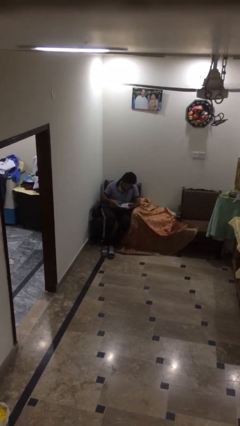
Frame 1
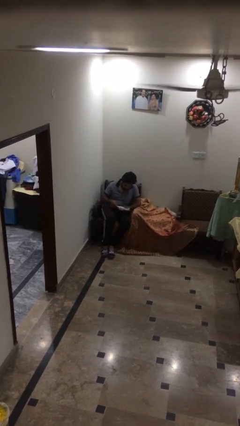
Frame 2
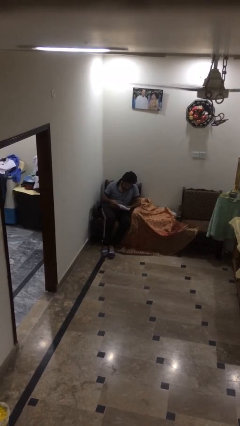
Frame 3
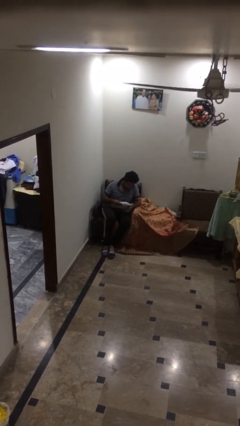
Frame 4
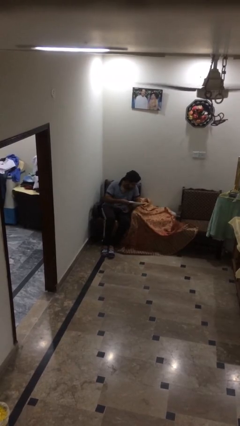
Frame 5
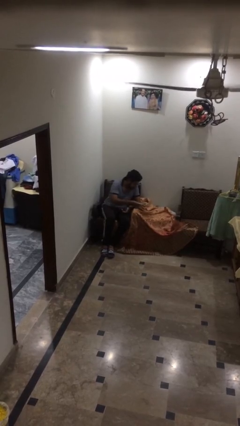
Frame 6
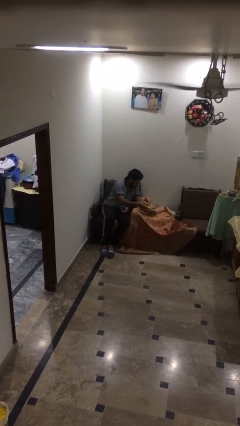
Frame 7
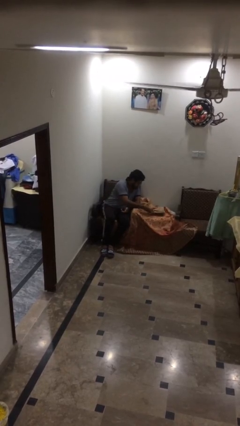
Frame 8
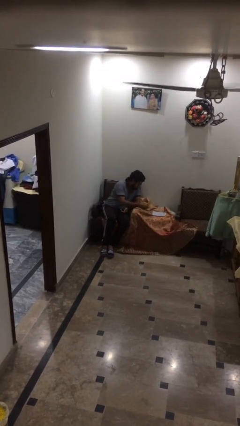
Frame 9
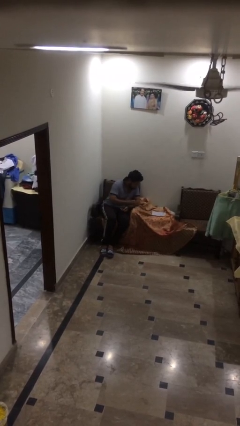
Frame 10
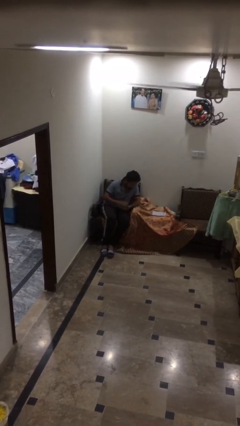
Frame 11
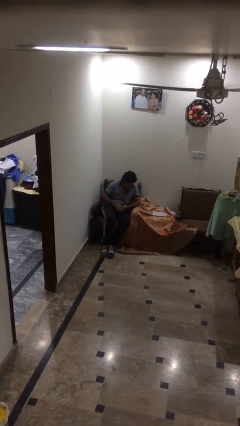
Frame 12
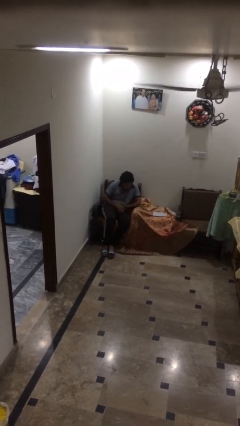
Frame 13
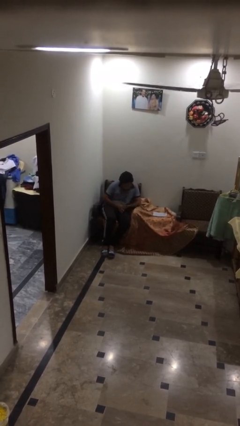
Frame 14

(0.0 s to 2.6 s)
person puts down object on table

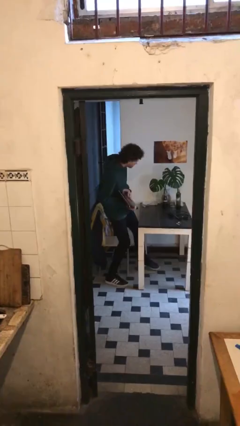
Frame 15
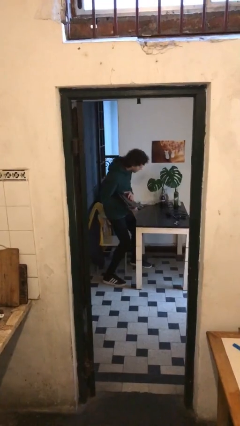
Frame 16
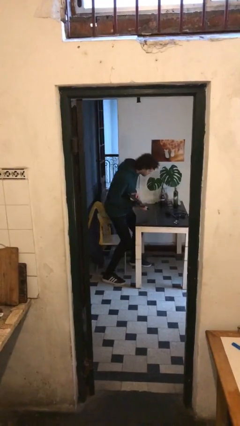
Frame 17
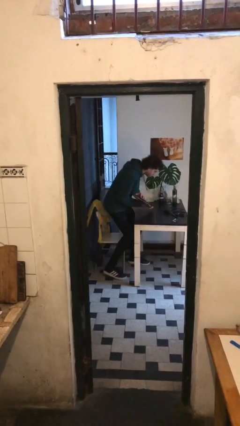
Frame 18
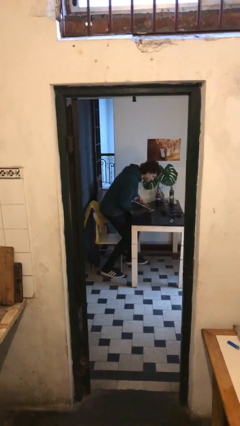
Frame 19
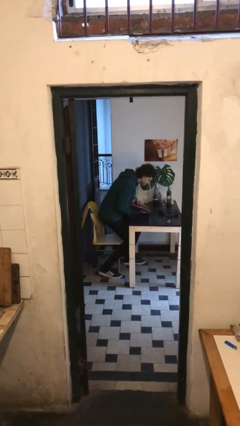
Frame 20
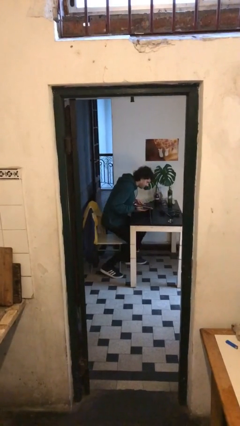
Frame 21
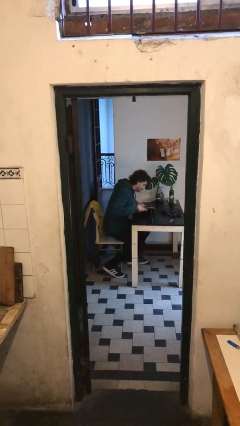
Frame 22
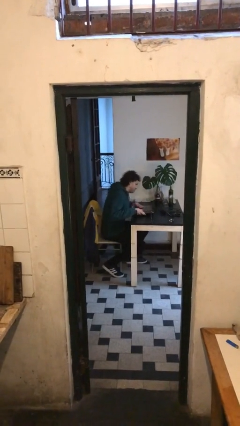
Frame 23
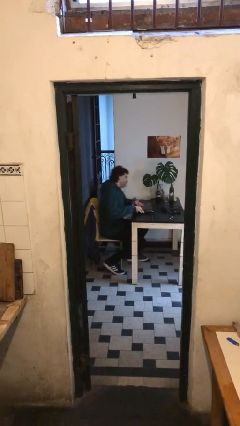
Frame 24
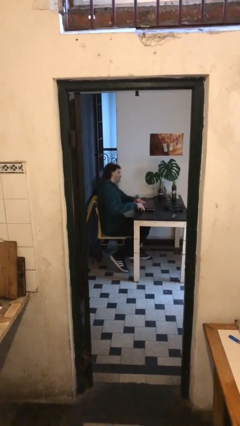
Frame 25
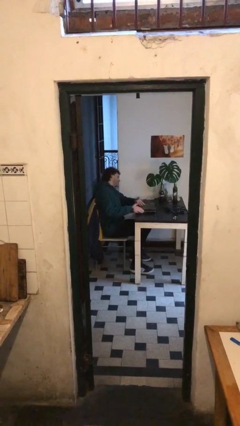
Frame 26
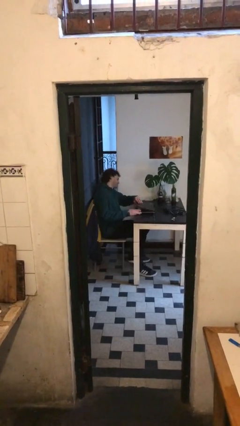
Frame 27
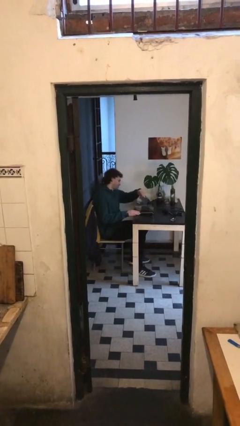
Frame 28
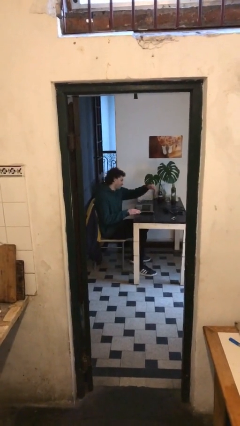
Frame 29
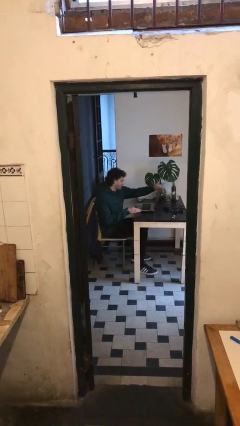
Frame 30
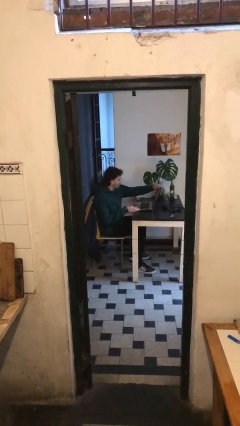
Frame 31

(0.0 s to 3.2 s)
person sits down

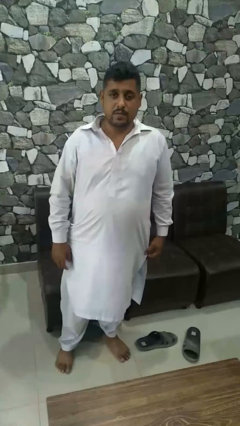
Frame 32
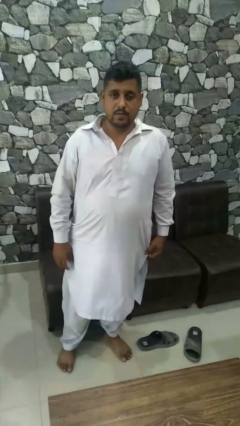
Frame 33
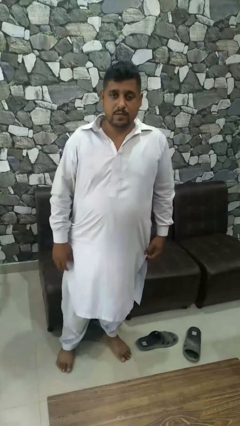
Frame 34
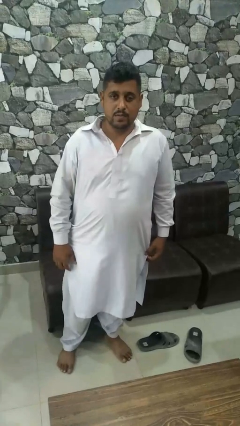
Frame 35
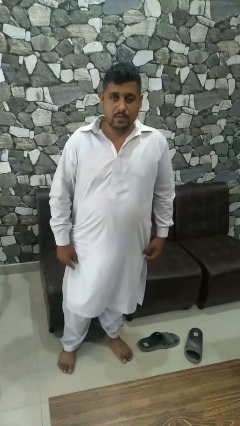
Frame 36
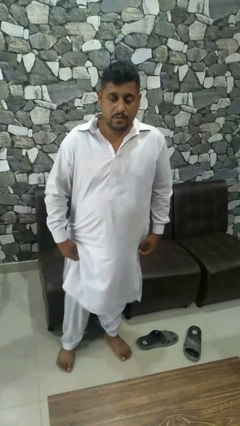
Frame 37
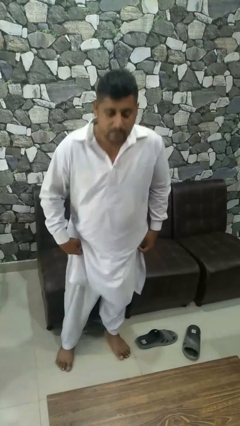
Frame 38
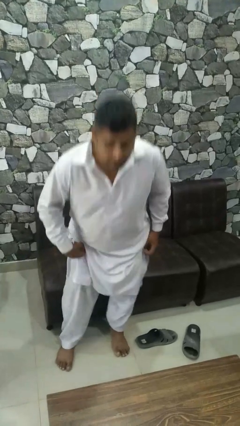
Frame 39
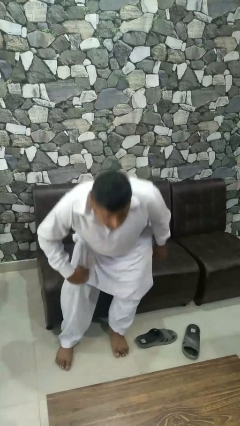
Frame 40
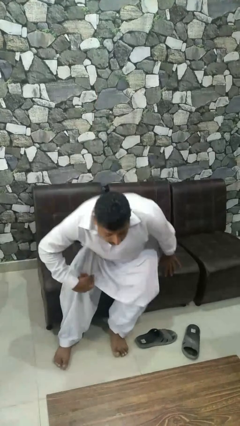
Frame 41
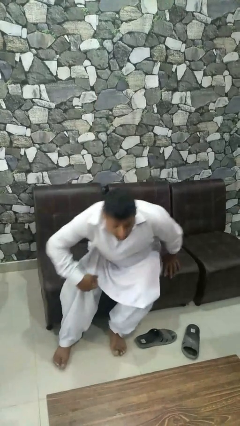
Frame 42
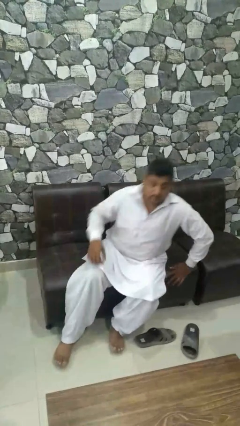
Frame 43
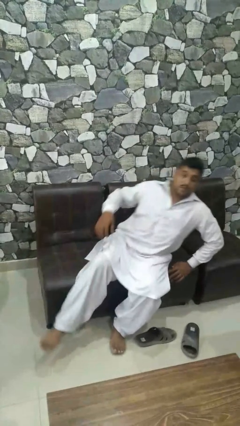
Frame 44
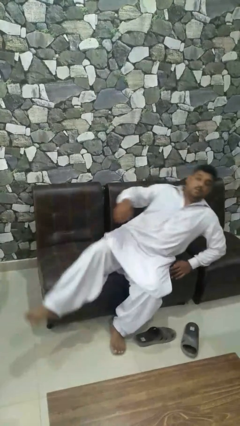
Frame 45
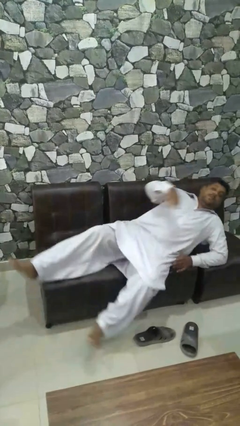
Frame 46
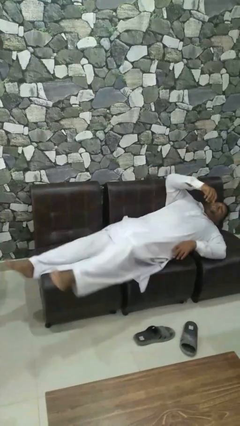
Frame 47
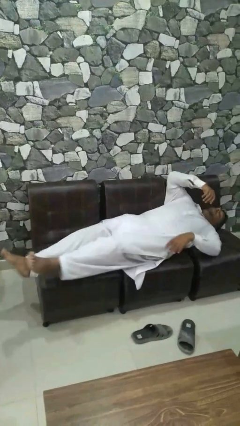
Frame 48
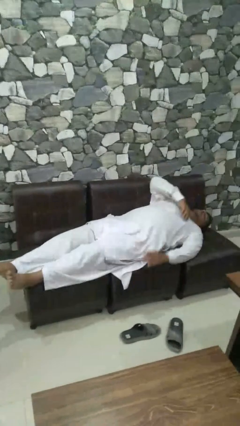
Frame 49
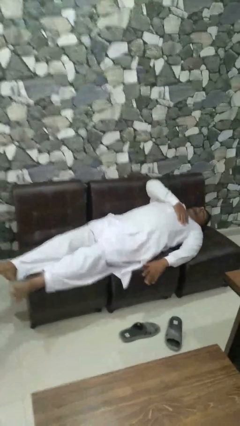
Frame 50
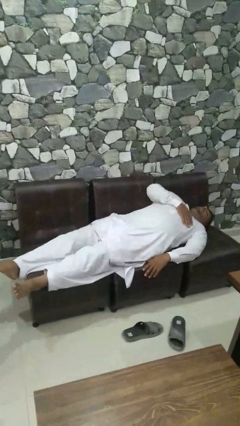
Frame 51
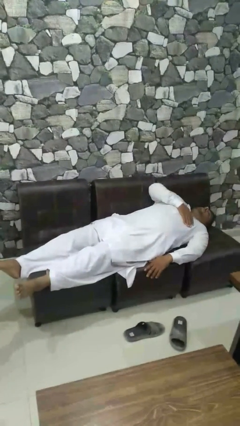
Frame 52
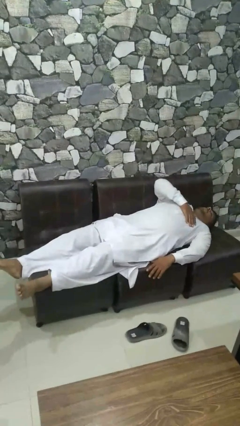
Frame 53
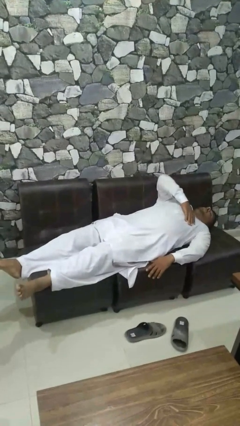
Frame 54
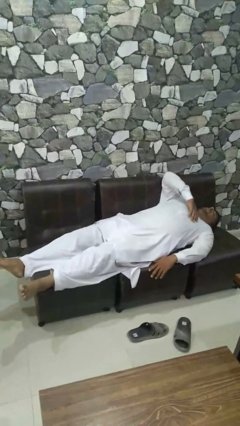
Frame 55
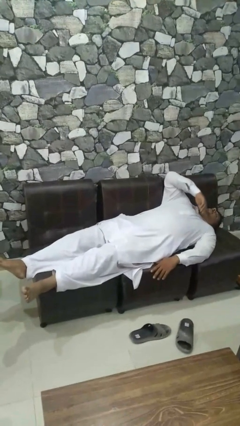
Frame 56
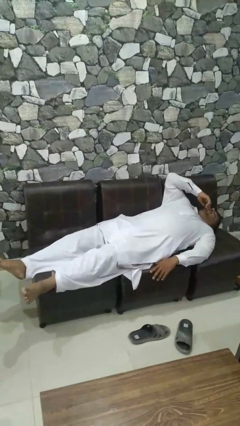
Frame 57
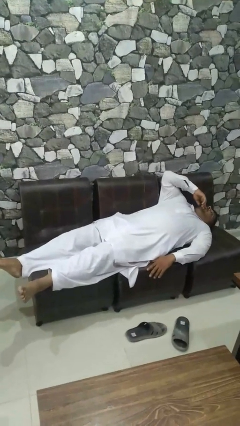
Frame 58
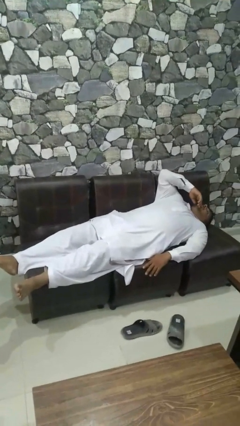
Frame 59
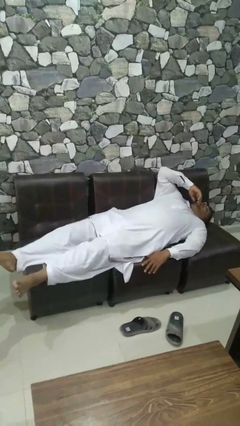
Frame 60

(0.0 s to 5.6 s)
person lies down on couch

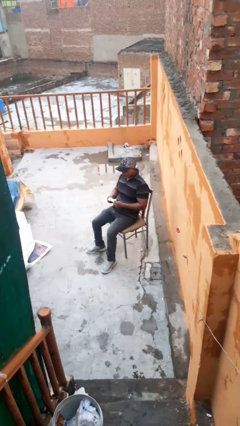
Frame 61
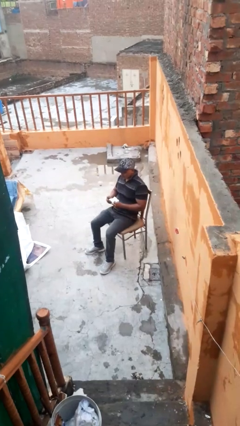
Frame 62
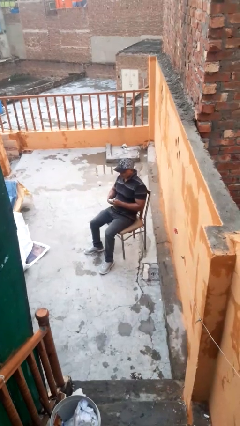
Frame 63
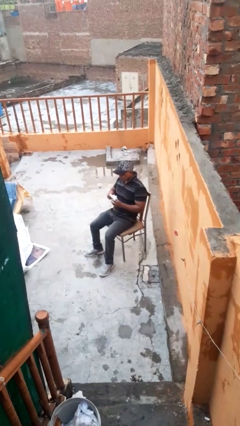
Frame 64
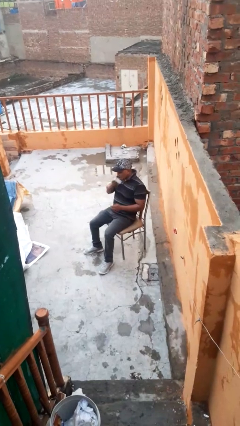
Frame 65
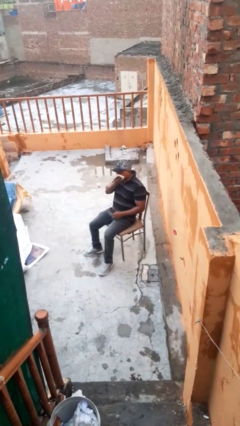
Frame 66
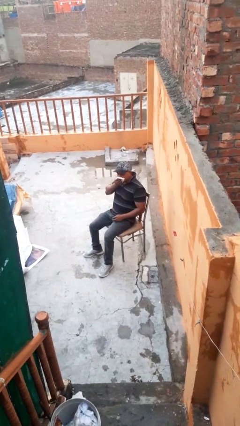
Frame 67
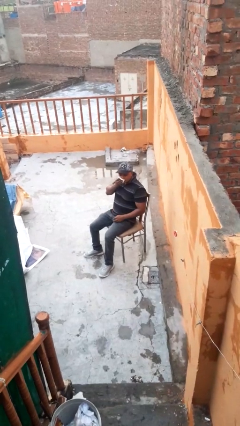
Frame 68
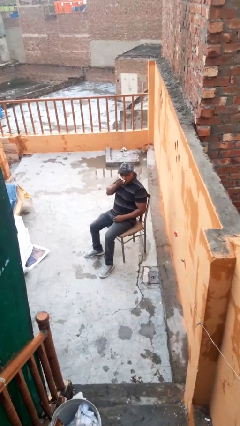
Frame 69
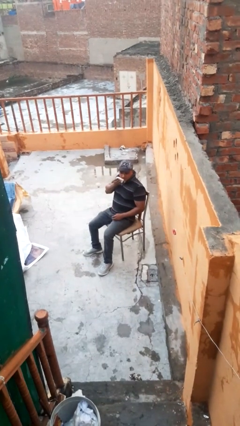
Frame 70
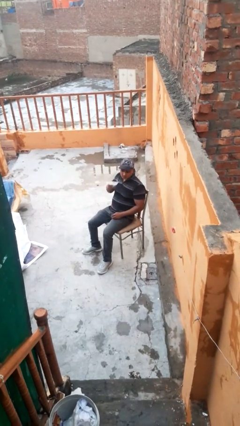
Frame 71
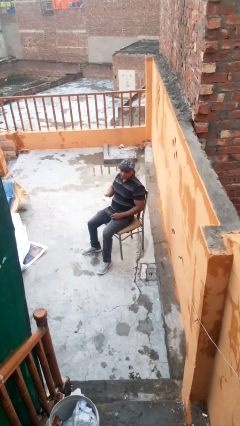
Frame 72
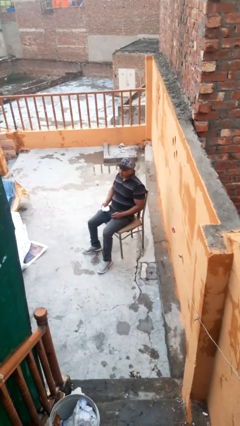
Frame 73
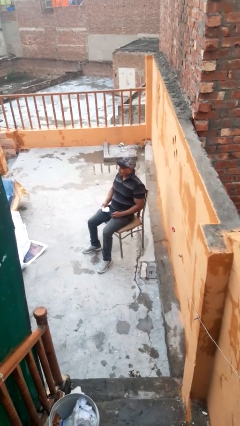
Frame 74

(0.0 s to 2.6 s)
person wipes mouth with napkin

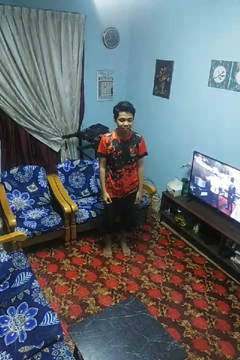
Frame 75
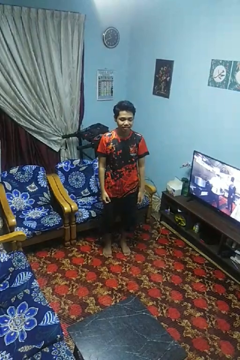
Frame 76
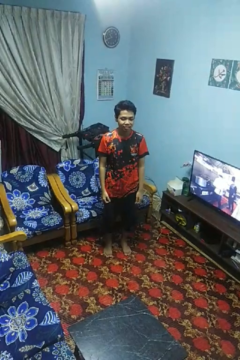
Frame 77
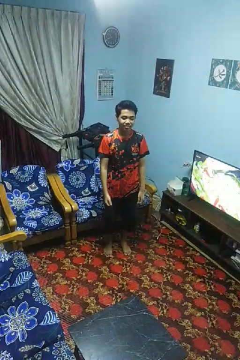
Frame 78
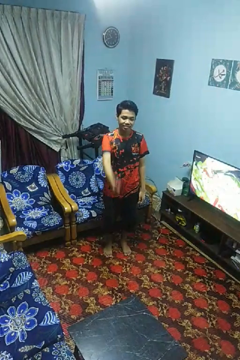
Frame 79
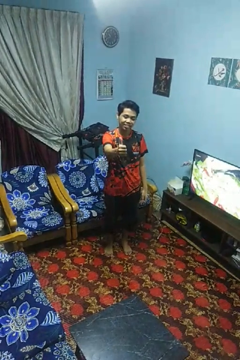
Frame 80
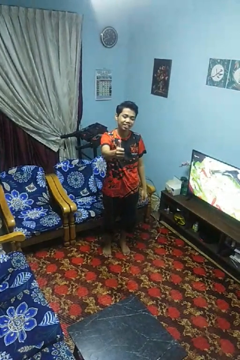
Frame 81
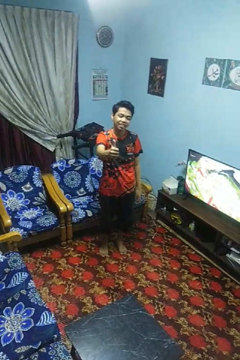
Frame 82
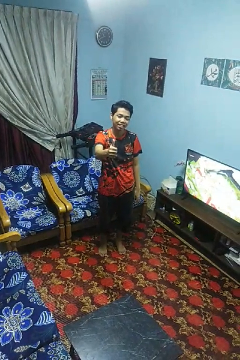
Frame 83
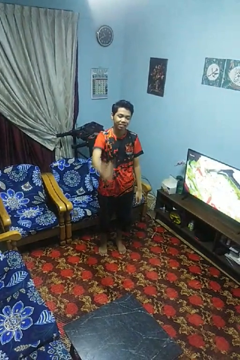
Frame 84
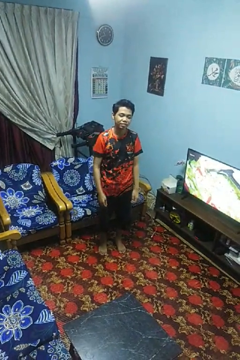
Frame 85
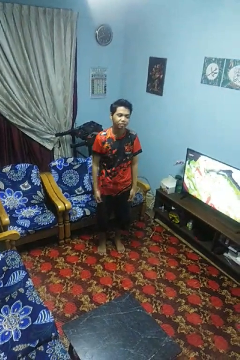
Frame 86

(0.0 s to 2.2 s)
person gestures thumbs up

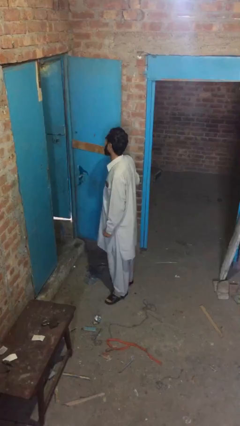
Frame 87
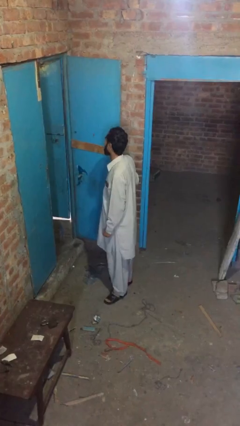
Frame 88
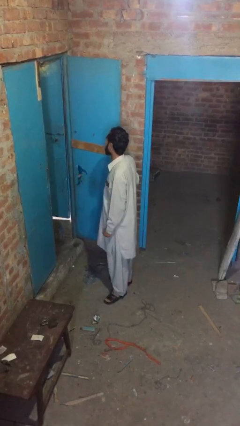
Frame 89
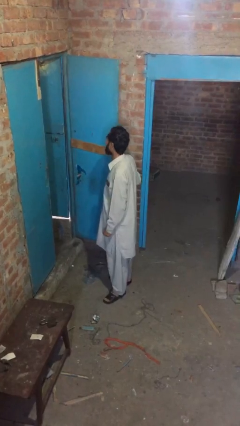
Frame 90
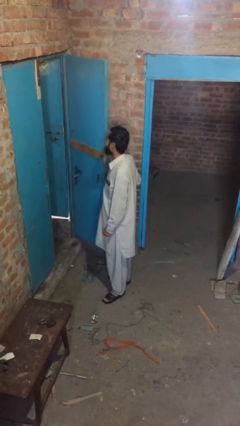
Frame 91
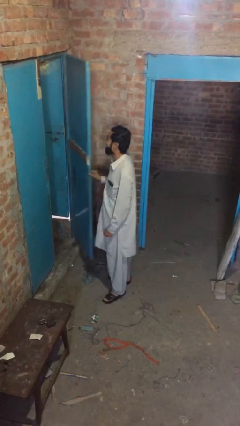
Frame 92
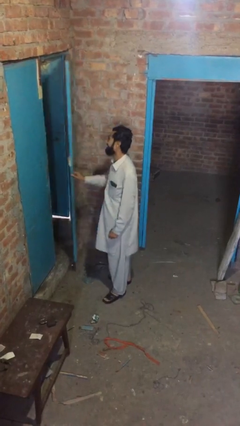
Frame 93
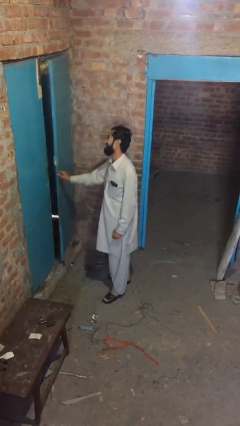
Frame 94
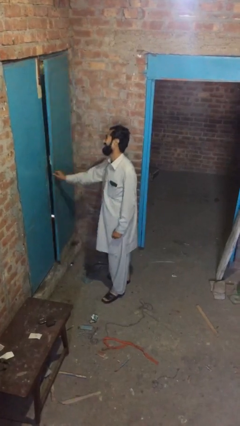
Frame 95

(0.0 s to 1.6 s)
person closes facility door
